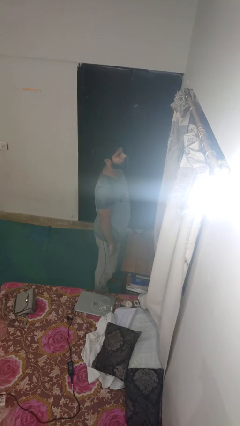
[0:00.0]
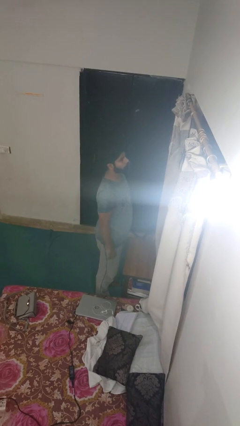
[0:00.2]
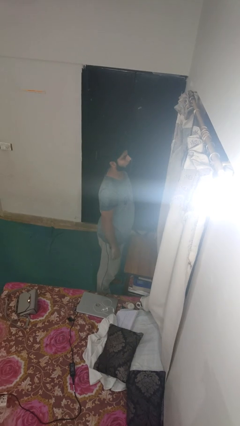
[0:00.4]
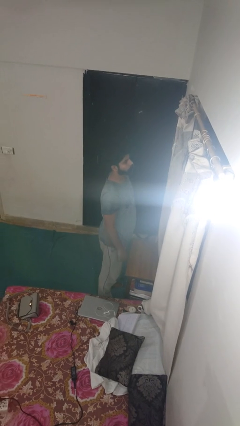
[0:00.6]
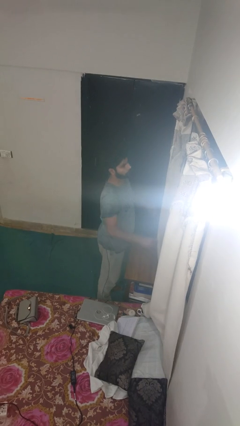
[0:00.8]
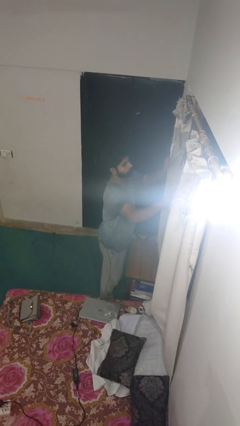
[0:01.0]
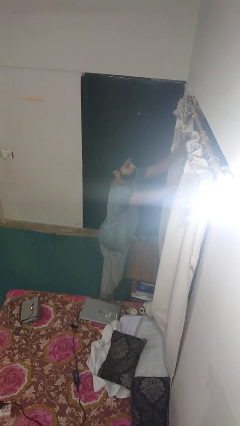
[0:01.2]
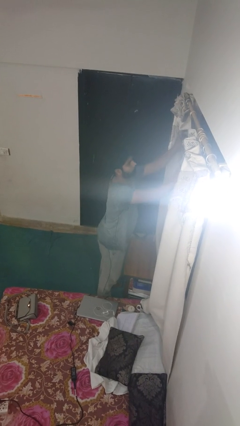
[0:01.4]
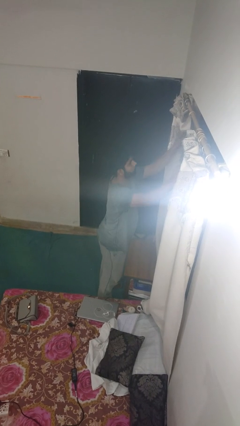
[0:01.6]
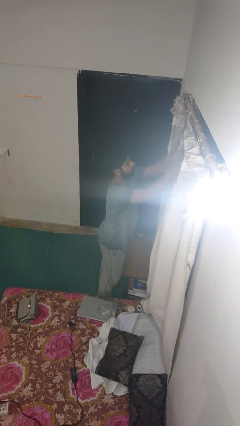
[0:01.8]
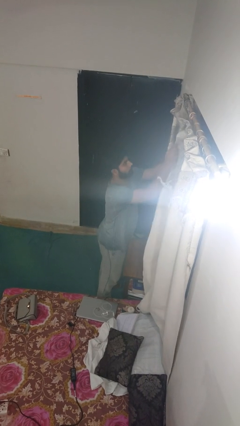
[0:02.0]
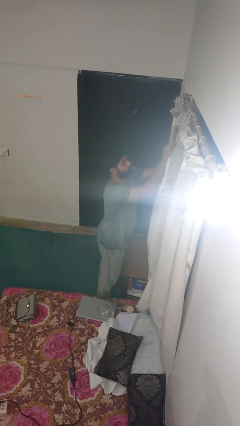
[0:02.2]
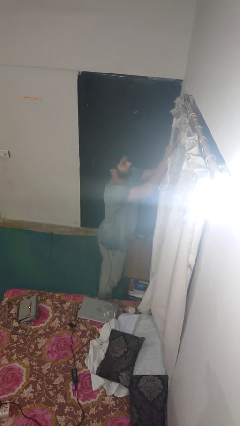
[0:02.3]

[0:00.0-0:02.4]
person closes curtains

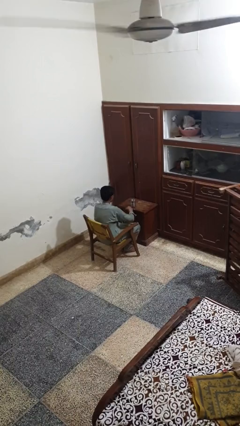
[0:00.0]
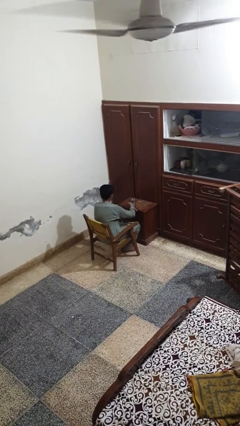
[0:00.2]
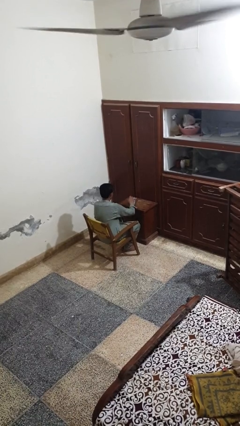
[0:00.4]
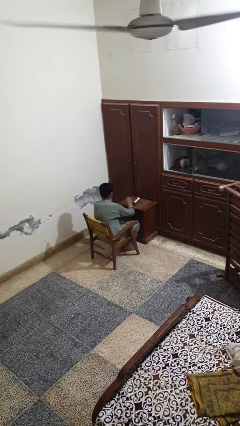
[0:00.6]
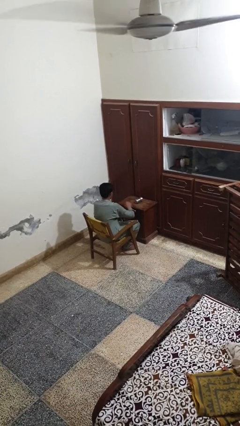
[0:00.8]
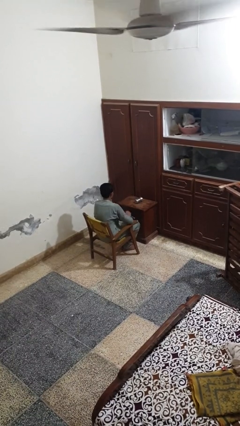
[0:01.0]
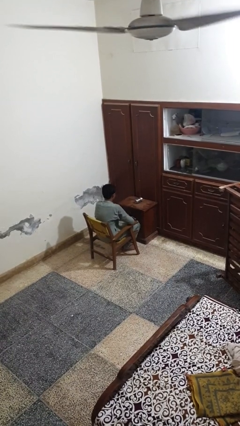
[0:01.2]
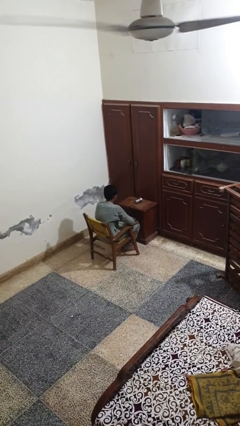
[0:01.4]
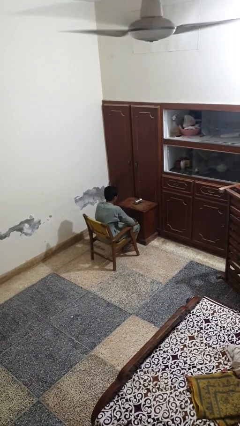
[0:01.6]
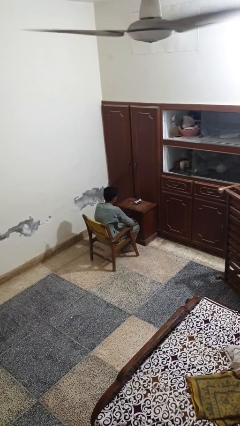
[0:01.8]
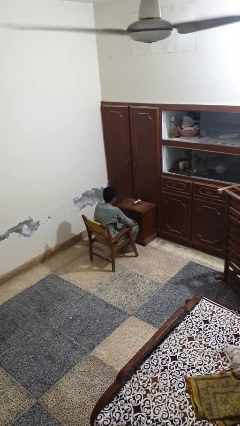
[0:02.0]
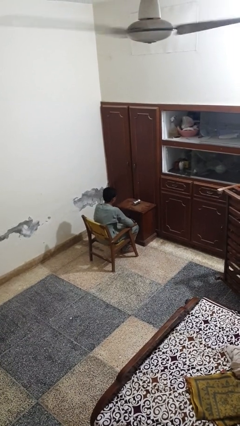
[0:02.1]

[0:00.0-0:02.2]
person knocks over glass

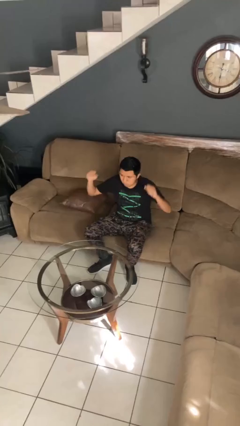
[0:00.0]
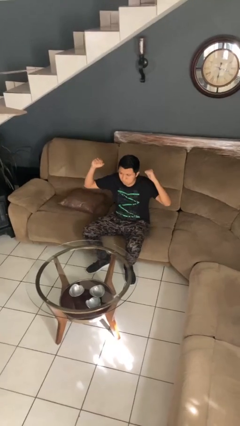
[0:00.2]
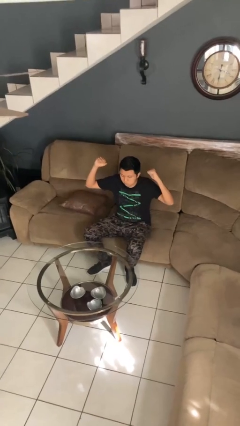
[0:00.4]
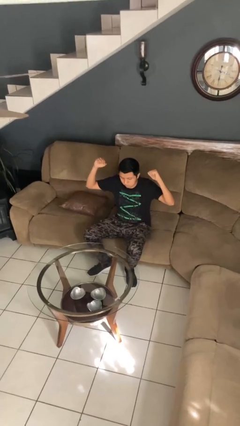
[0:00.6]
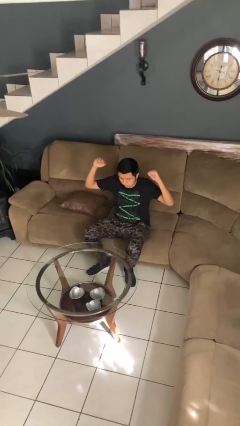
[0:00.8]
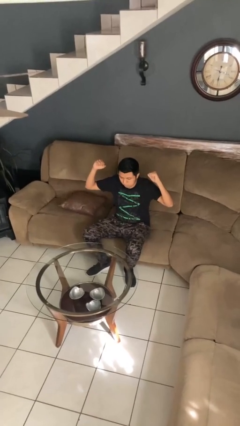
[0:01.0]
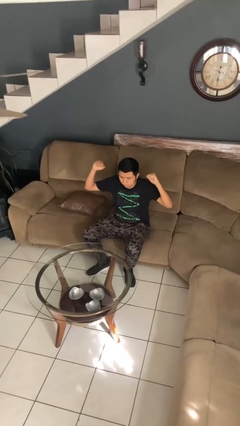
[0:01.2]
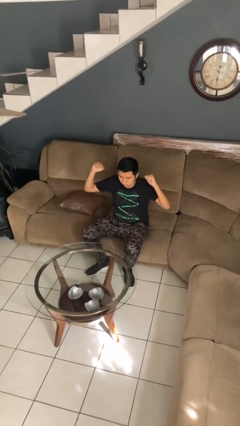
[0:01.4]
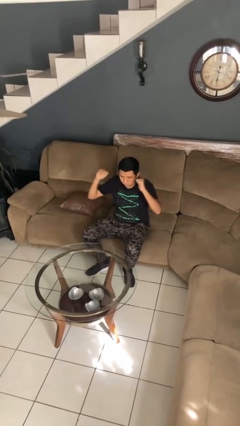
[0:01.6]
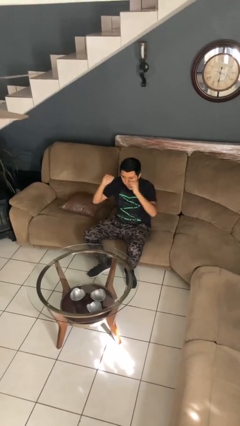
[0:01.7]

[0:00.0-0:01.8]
person gestures zoom in

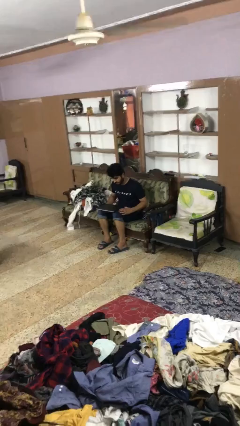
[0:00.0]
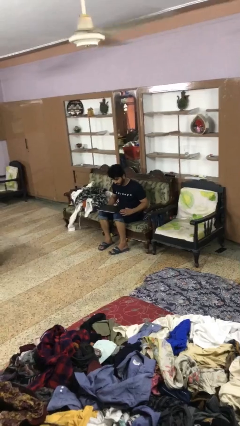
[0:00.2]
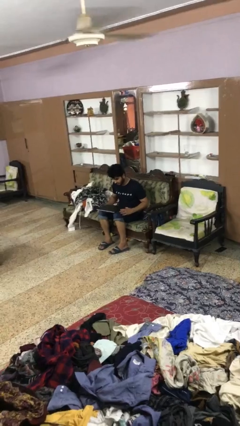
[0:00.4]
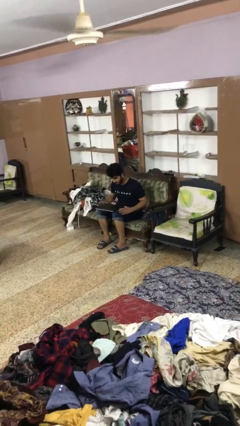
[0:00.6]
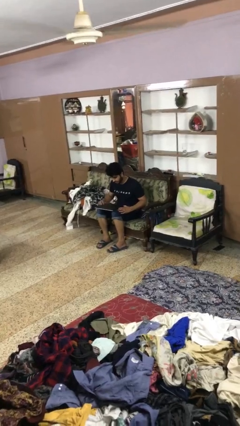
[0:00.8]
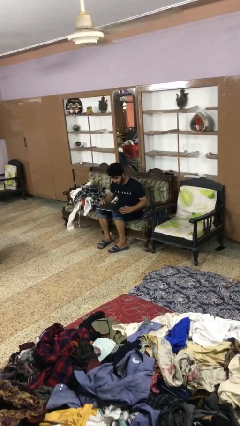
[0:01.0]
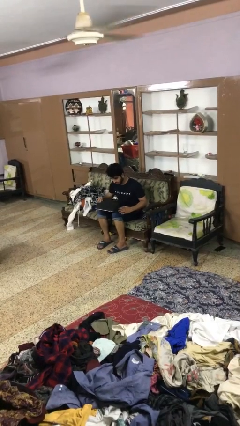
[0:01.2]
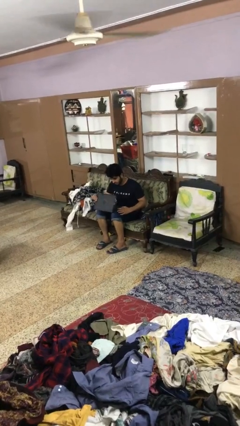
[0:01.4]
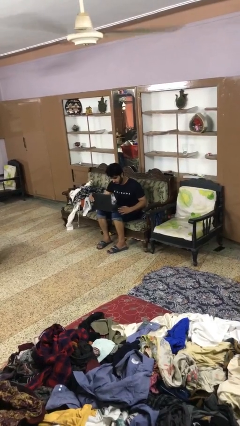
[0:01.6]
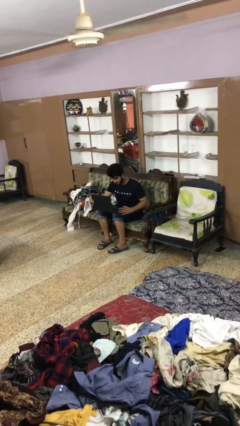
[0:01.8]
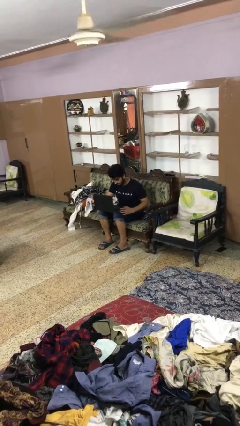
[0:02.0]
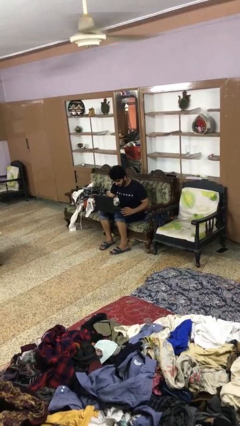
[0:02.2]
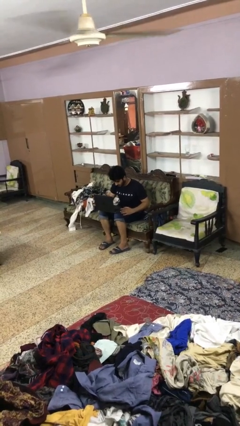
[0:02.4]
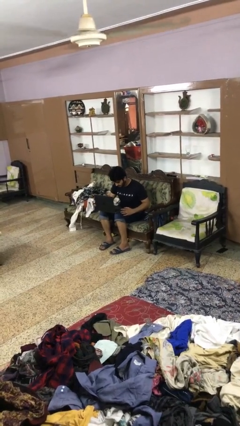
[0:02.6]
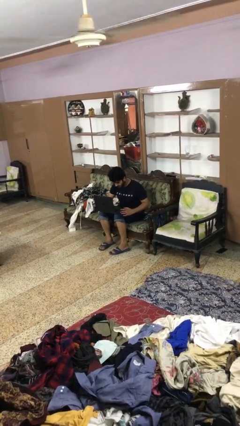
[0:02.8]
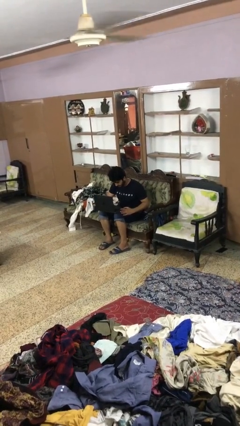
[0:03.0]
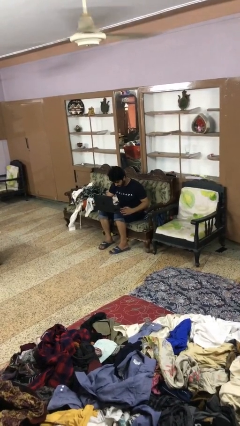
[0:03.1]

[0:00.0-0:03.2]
person opens laptop

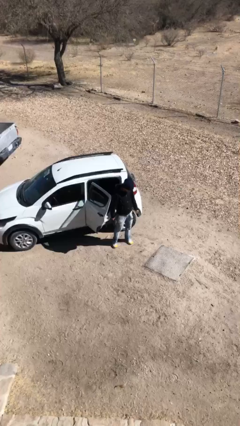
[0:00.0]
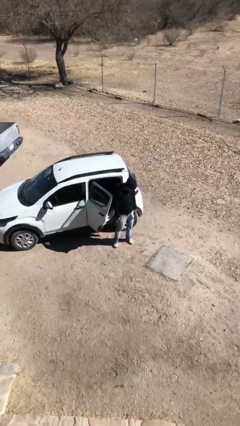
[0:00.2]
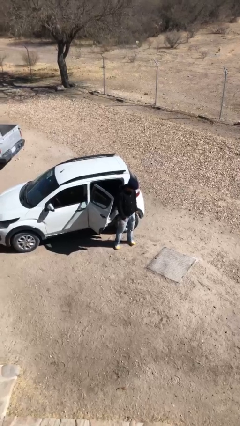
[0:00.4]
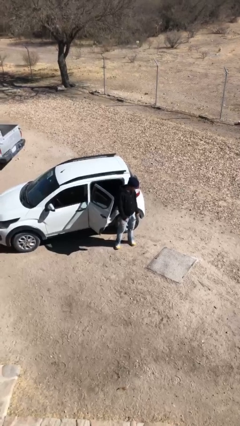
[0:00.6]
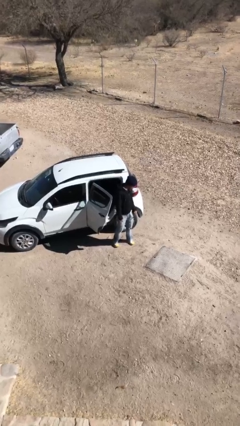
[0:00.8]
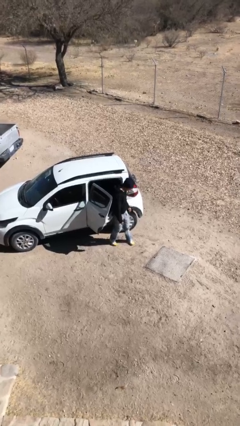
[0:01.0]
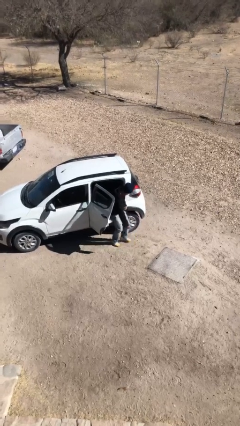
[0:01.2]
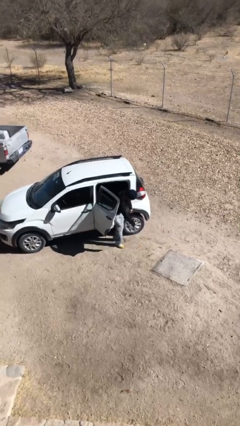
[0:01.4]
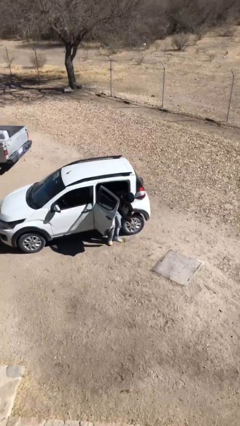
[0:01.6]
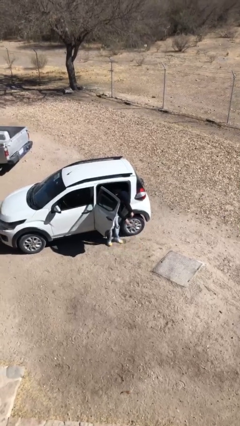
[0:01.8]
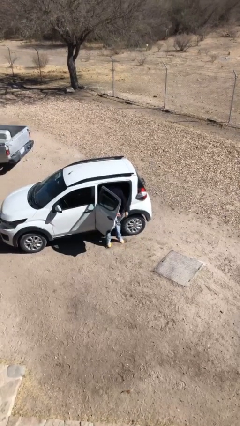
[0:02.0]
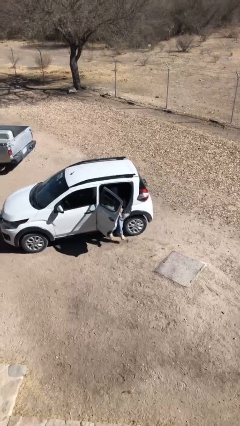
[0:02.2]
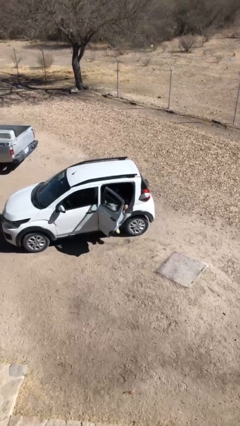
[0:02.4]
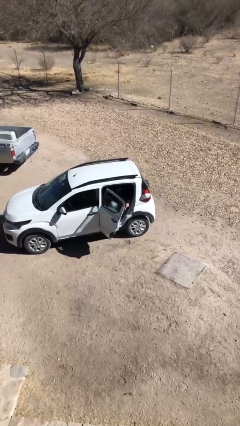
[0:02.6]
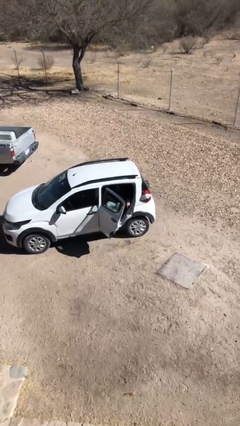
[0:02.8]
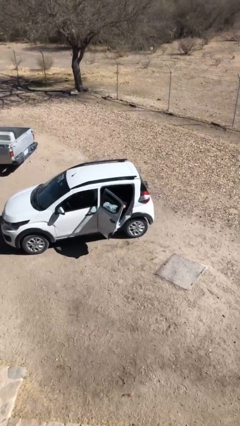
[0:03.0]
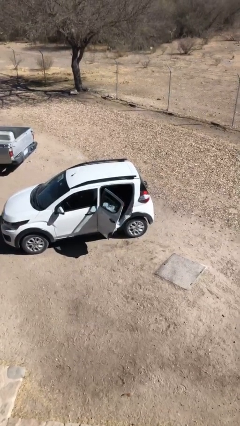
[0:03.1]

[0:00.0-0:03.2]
person enters car

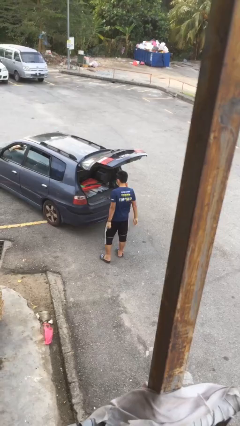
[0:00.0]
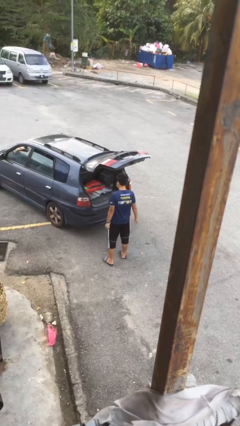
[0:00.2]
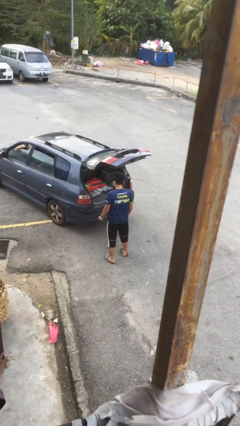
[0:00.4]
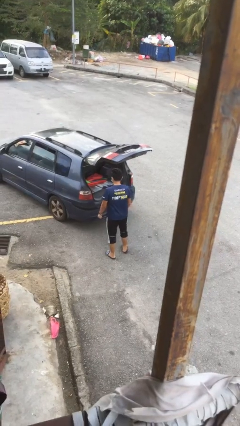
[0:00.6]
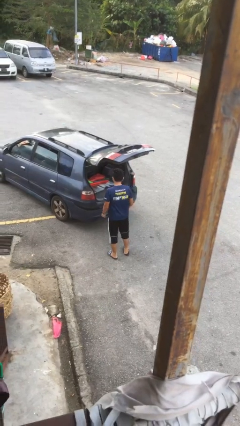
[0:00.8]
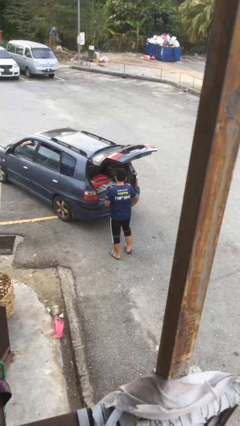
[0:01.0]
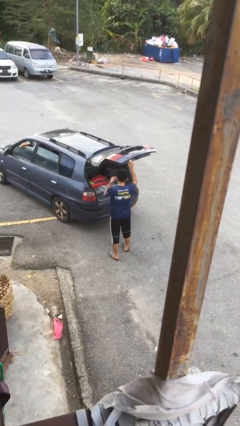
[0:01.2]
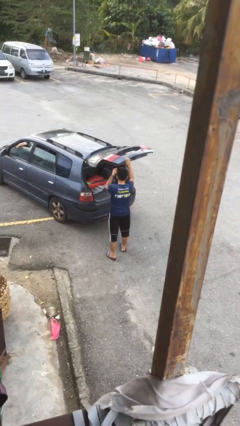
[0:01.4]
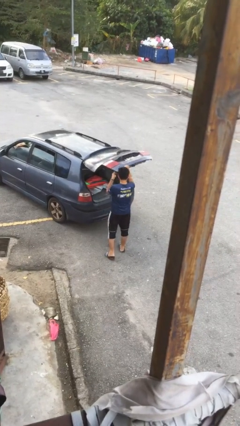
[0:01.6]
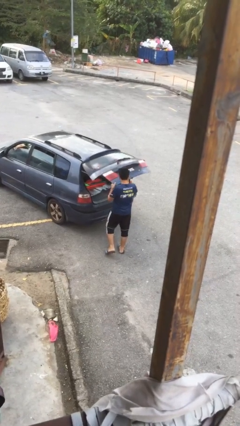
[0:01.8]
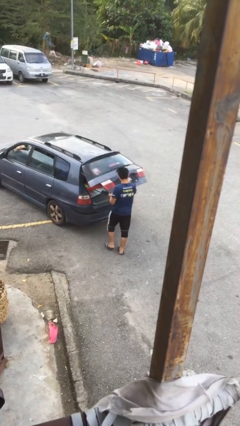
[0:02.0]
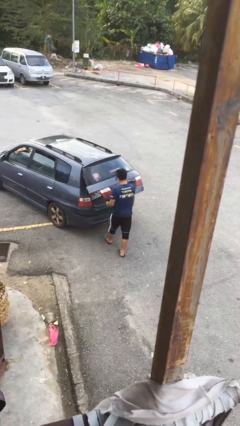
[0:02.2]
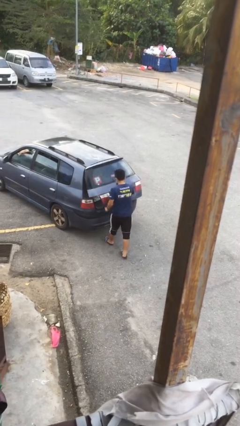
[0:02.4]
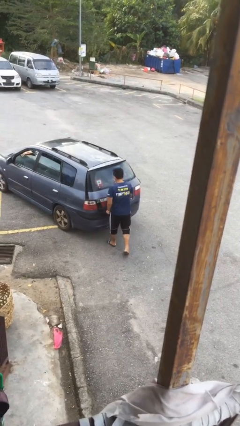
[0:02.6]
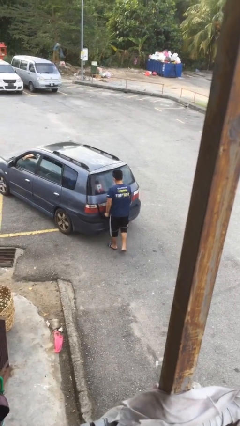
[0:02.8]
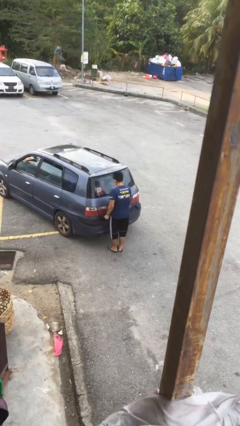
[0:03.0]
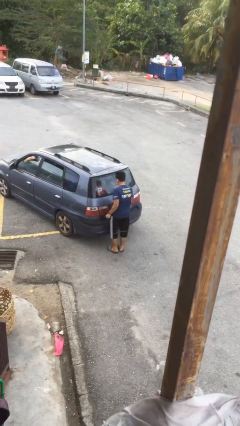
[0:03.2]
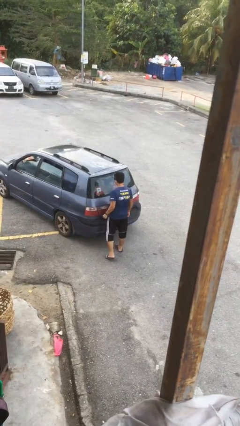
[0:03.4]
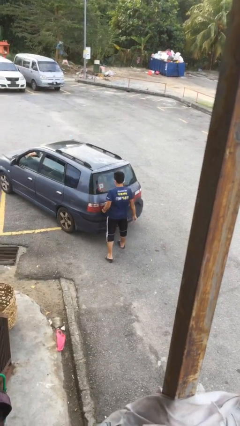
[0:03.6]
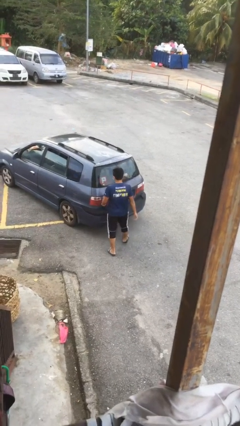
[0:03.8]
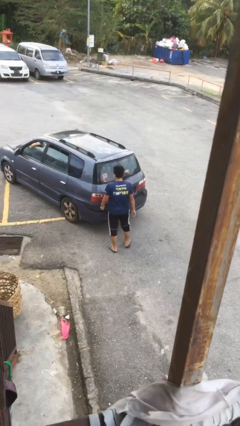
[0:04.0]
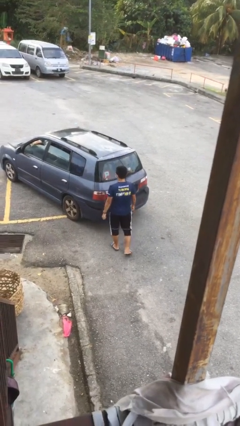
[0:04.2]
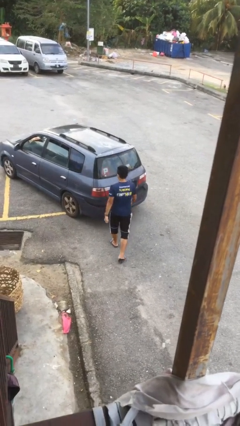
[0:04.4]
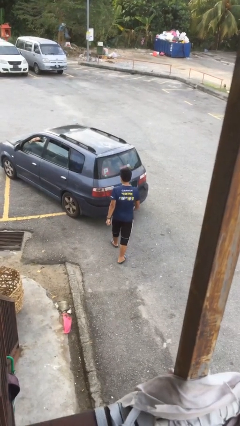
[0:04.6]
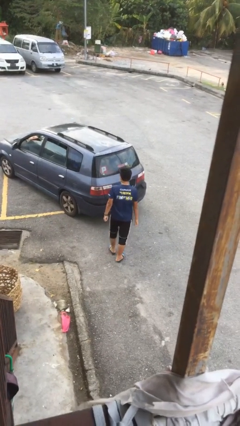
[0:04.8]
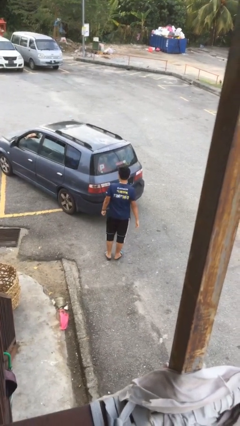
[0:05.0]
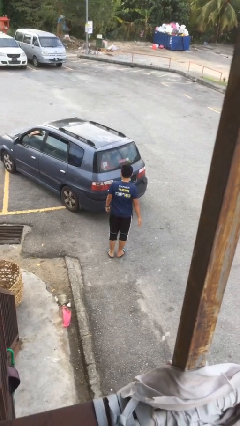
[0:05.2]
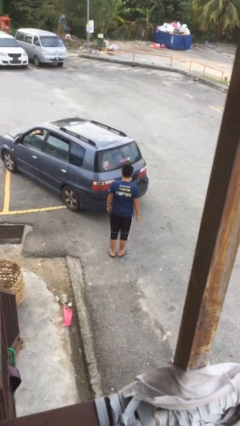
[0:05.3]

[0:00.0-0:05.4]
person closes car trunk
